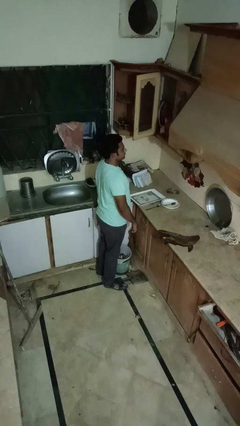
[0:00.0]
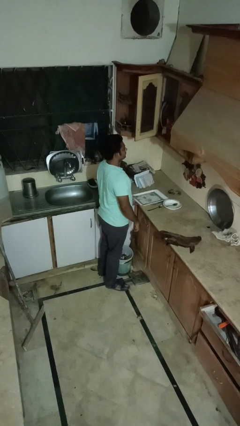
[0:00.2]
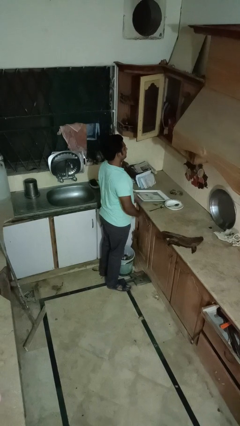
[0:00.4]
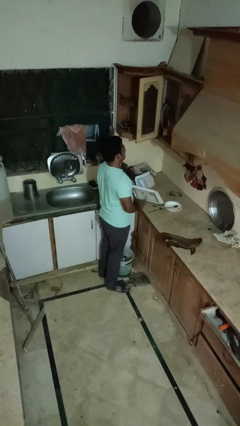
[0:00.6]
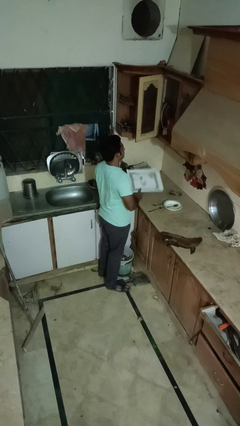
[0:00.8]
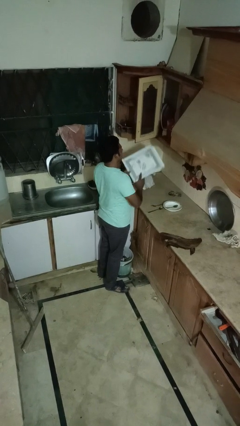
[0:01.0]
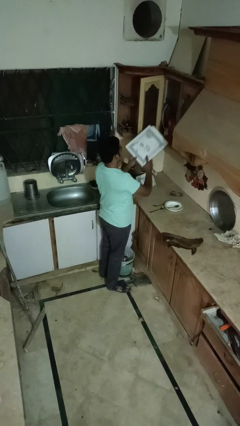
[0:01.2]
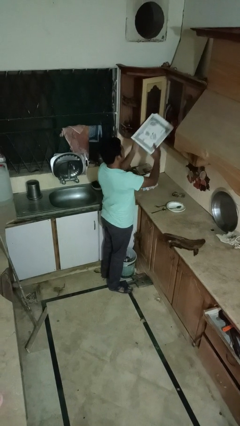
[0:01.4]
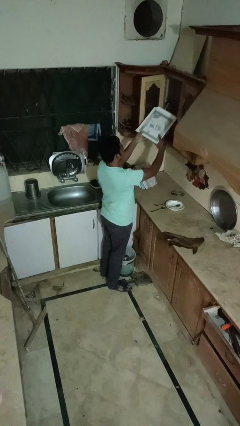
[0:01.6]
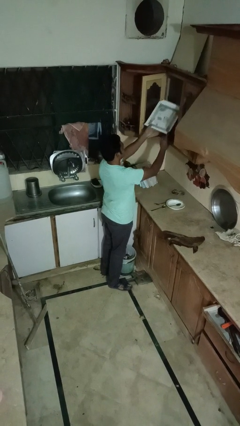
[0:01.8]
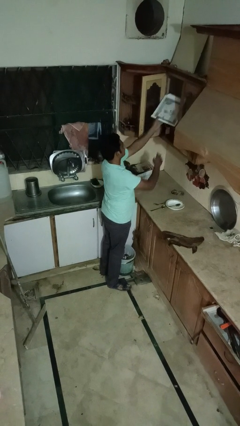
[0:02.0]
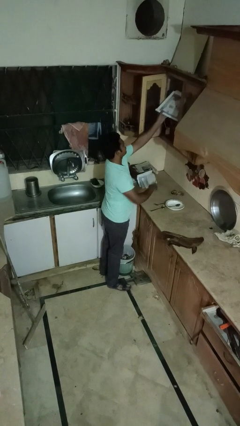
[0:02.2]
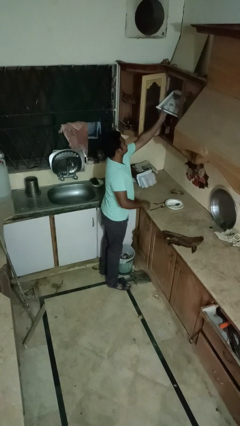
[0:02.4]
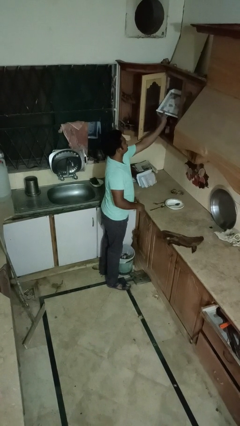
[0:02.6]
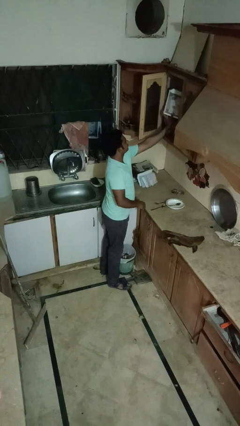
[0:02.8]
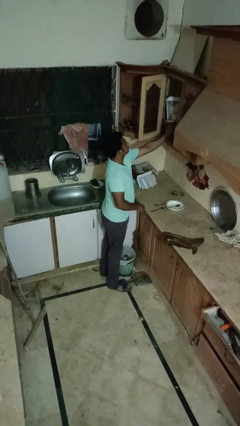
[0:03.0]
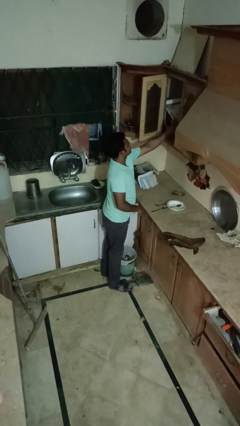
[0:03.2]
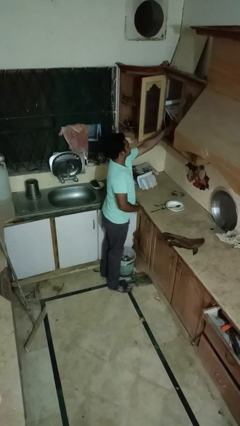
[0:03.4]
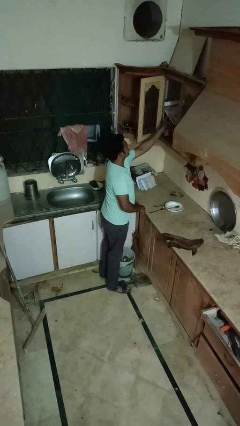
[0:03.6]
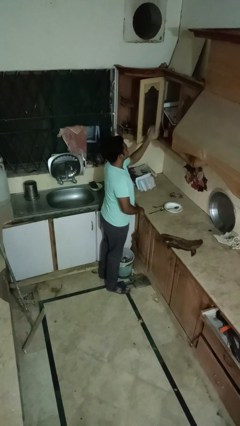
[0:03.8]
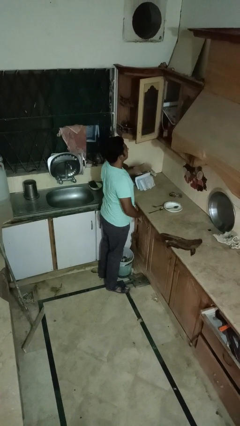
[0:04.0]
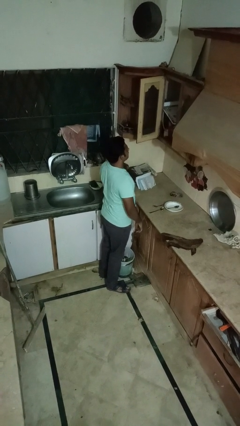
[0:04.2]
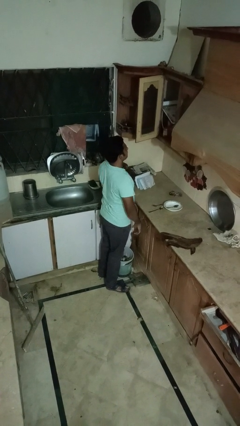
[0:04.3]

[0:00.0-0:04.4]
person puts object in cabinet

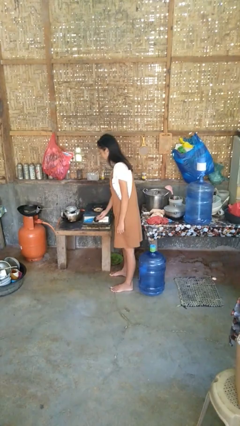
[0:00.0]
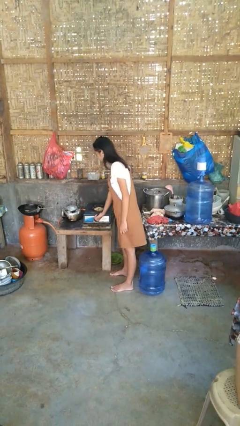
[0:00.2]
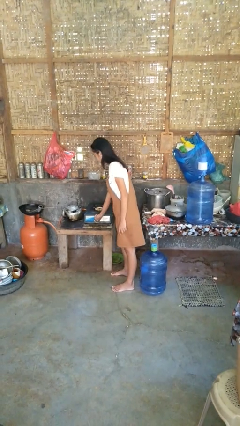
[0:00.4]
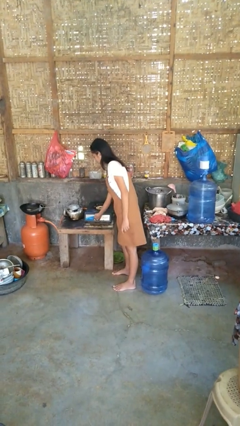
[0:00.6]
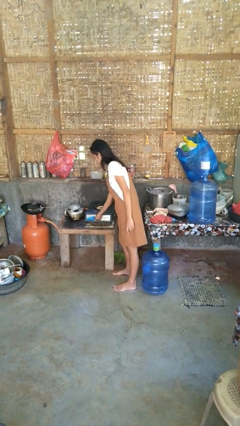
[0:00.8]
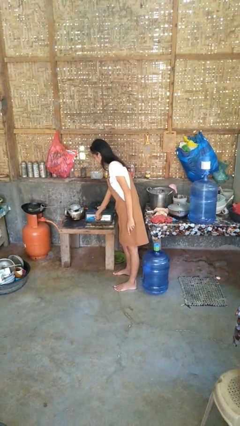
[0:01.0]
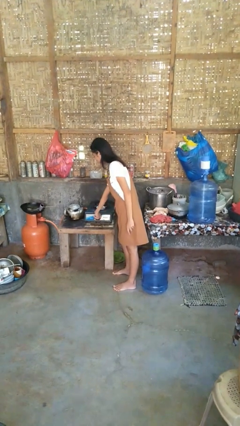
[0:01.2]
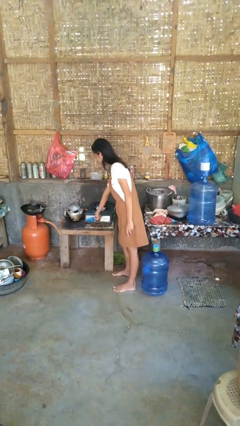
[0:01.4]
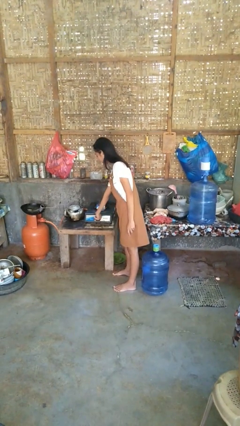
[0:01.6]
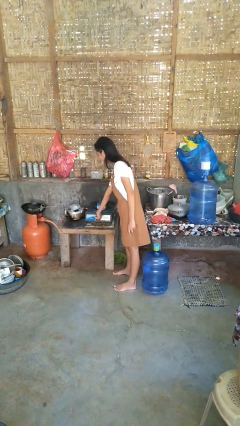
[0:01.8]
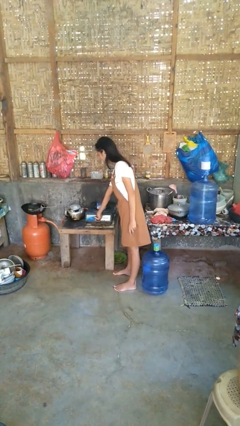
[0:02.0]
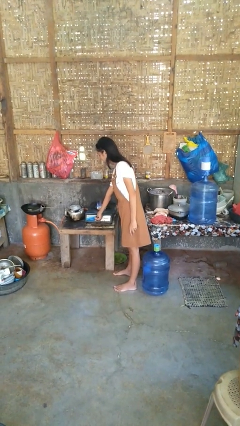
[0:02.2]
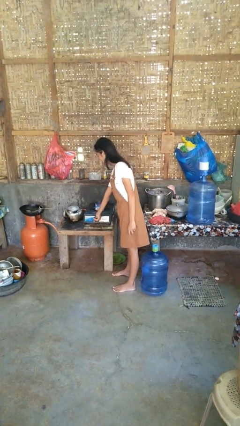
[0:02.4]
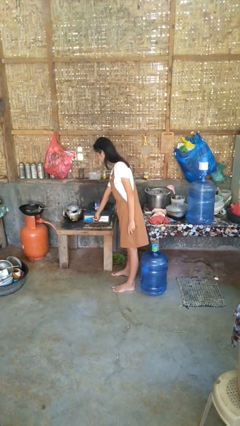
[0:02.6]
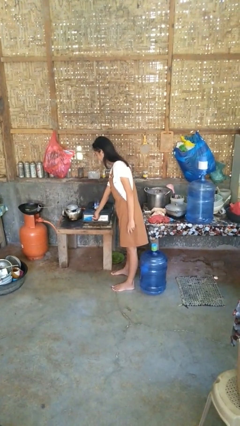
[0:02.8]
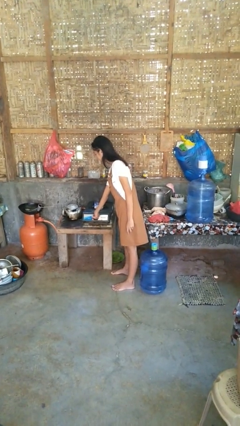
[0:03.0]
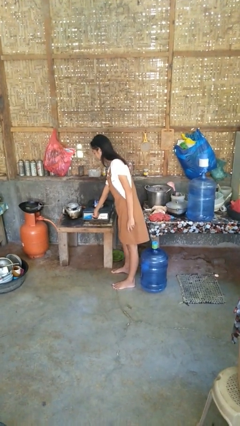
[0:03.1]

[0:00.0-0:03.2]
person turns on stovetop

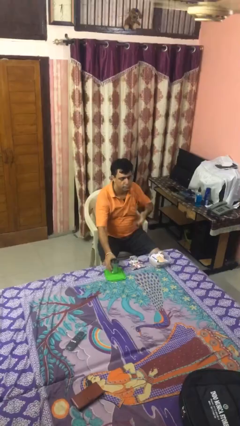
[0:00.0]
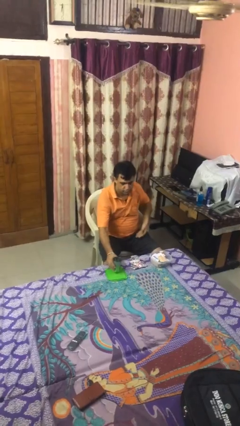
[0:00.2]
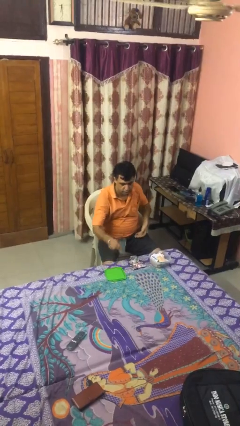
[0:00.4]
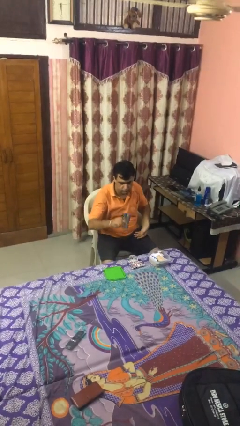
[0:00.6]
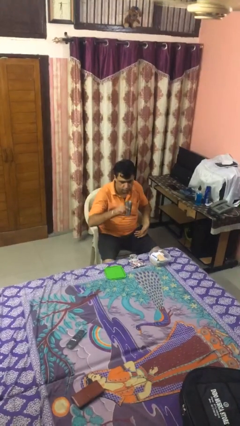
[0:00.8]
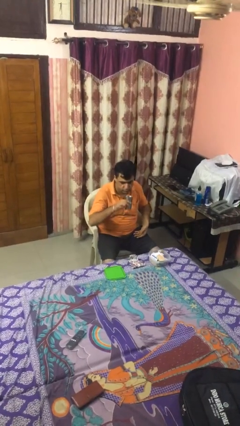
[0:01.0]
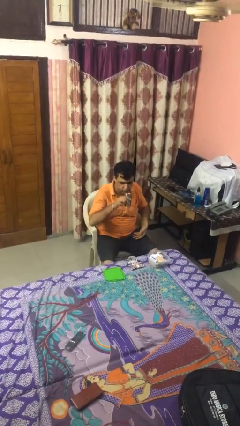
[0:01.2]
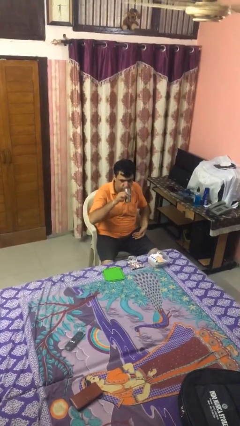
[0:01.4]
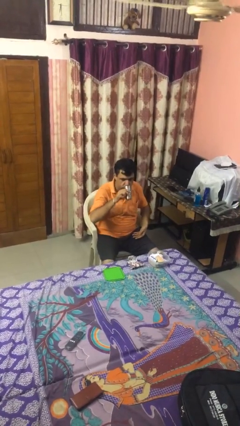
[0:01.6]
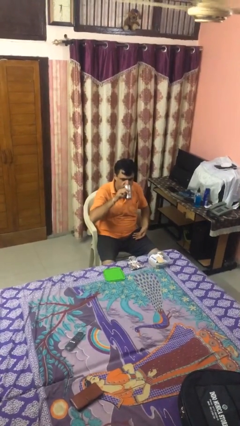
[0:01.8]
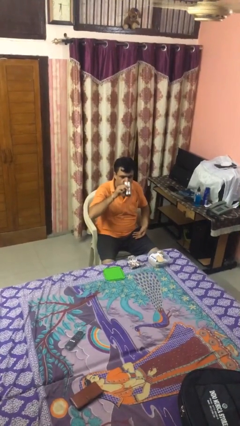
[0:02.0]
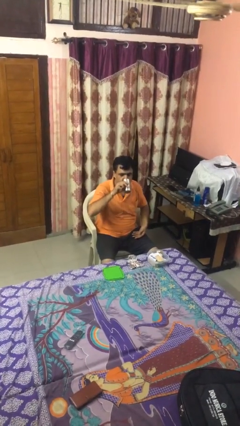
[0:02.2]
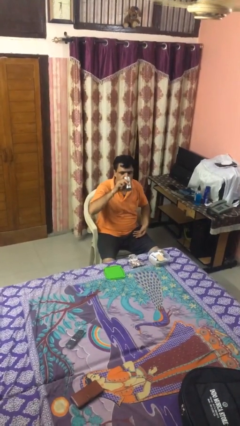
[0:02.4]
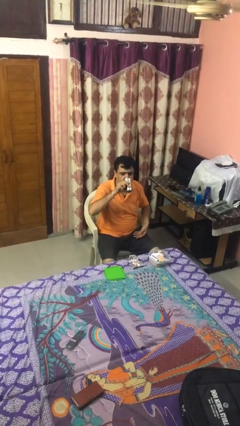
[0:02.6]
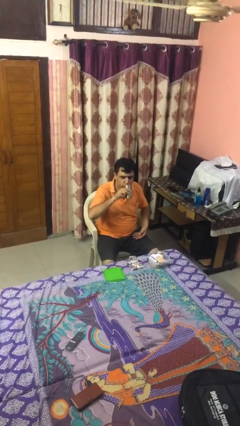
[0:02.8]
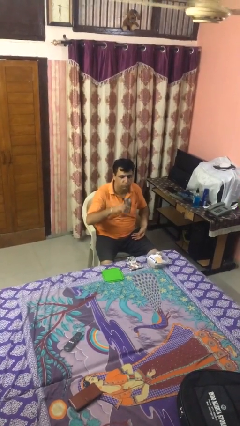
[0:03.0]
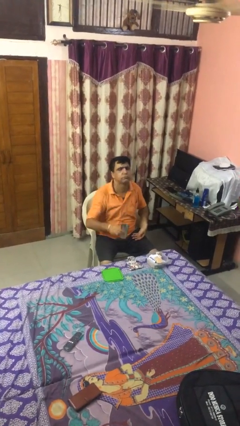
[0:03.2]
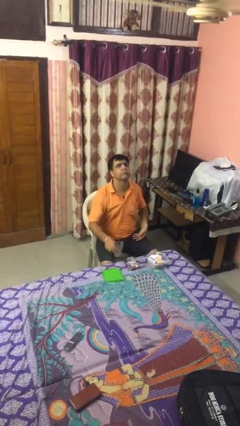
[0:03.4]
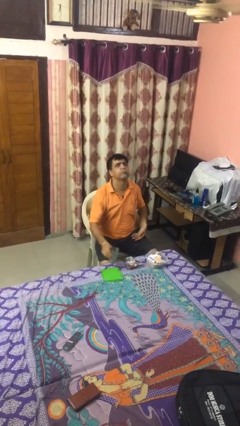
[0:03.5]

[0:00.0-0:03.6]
person drinks from cup

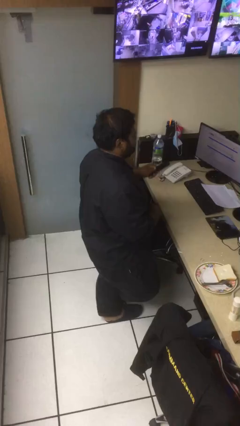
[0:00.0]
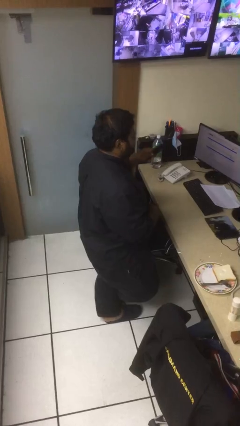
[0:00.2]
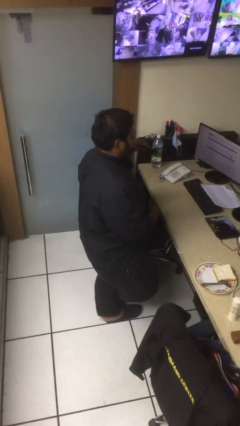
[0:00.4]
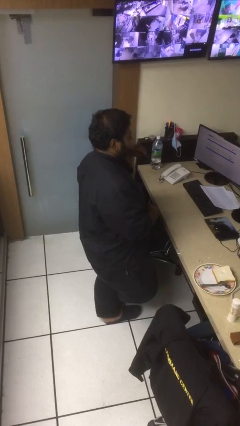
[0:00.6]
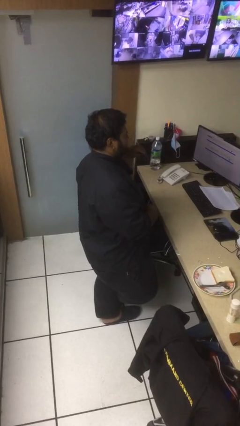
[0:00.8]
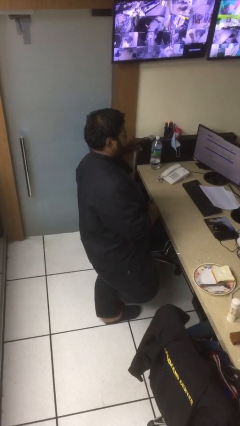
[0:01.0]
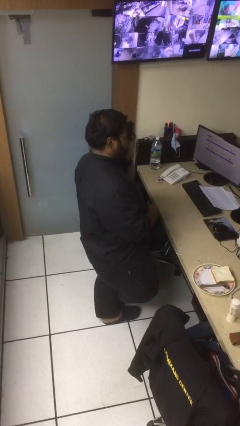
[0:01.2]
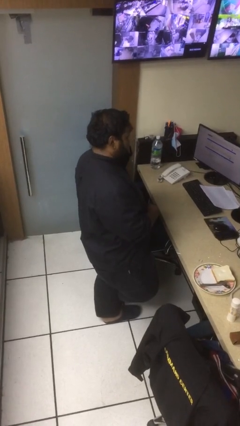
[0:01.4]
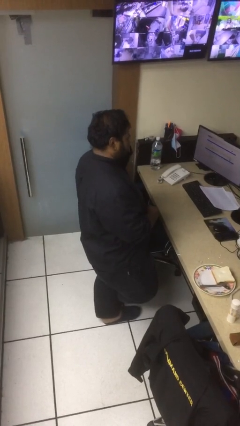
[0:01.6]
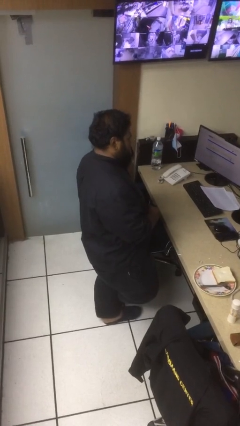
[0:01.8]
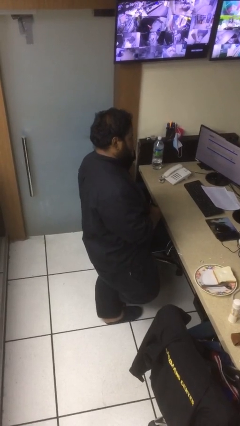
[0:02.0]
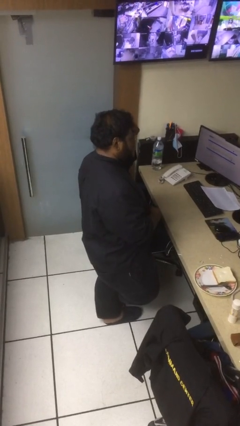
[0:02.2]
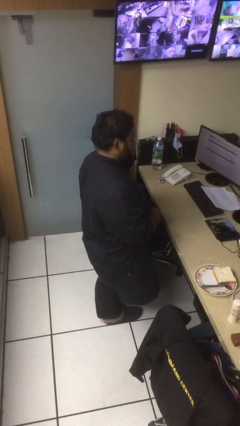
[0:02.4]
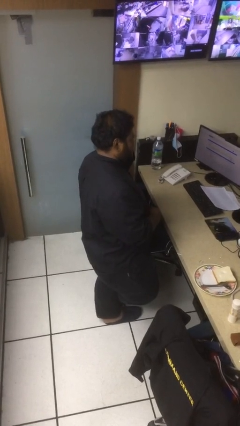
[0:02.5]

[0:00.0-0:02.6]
person brushes hair

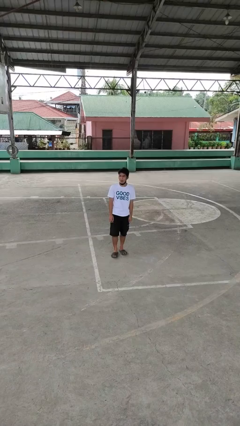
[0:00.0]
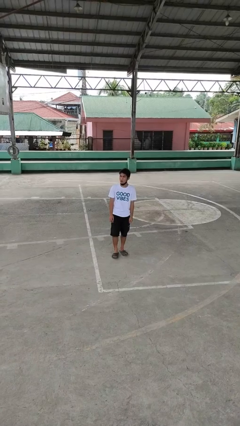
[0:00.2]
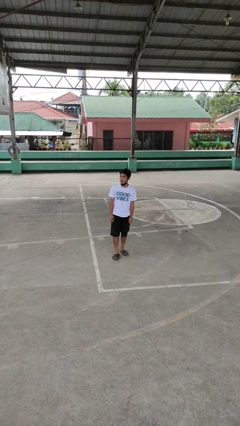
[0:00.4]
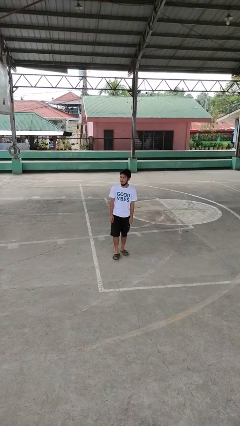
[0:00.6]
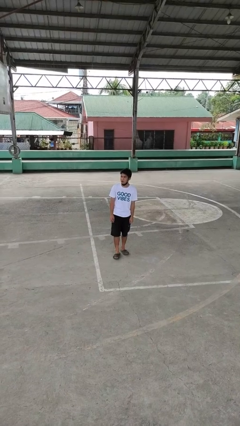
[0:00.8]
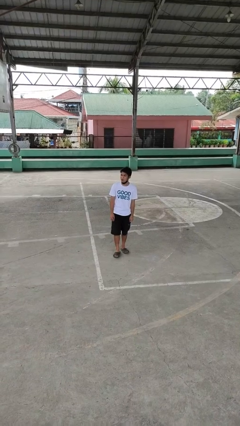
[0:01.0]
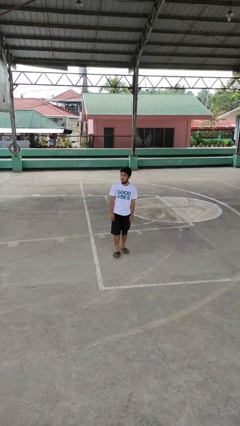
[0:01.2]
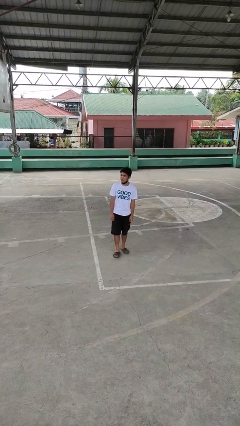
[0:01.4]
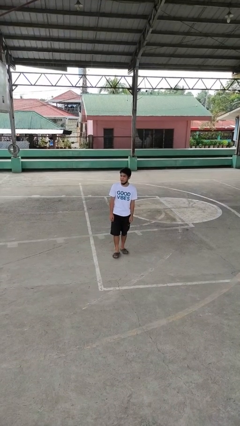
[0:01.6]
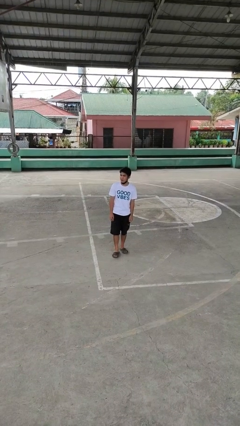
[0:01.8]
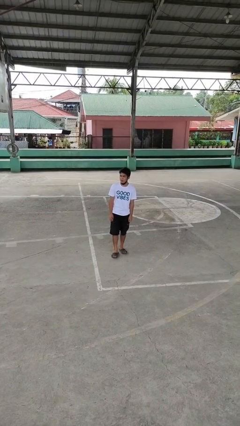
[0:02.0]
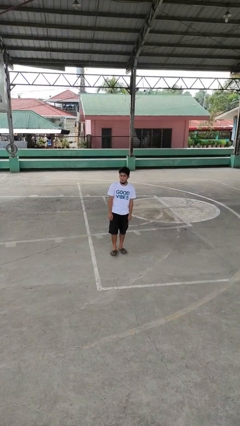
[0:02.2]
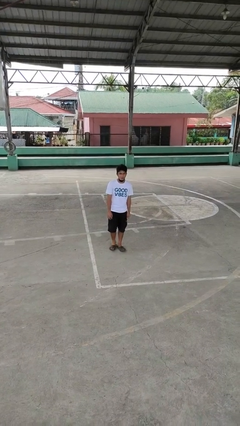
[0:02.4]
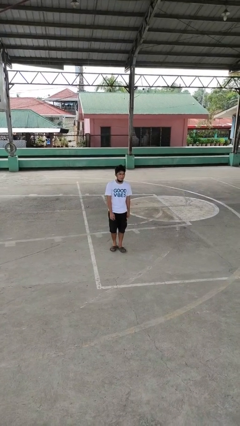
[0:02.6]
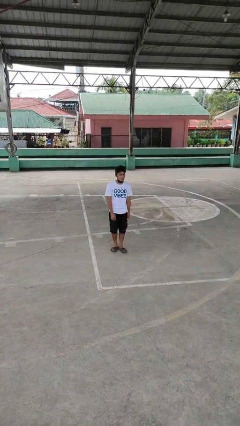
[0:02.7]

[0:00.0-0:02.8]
person sticks out tongue

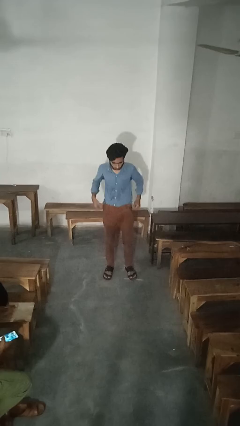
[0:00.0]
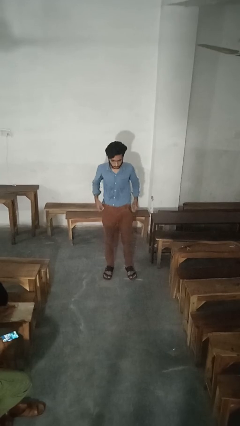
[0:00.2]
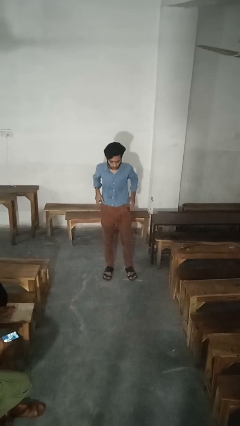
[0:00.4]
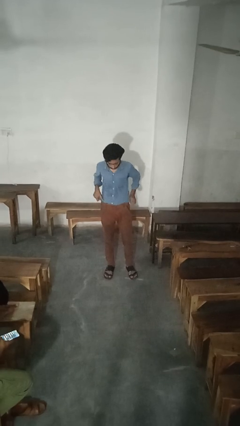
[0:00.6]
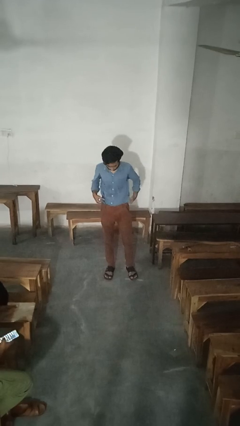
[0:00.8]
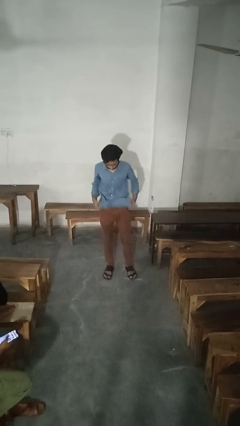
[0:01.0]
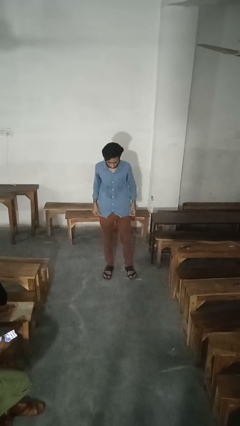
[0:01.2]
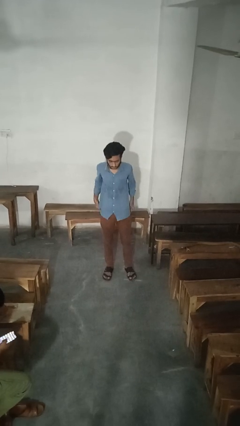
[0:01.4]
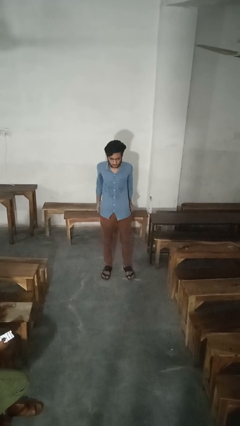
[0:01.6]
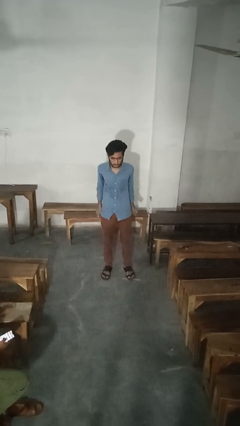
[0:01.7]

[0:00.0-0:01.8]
person untucks shirt
